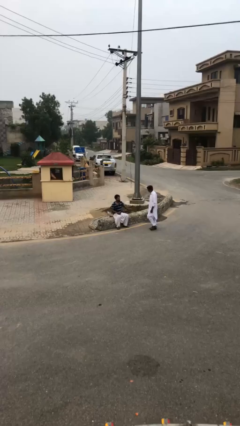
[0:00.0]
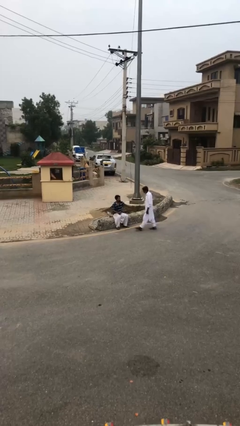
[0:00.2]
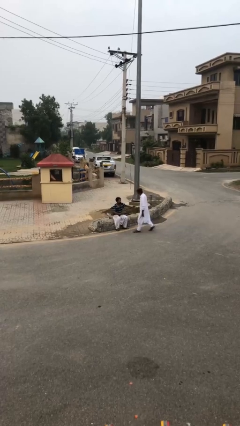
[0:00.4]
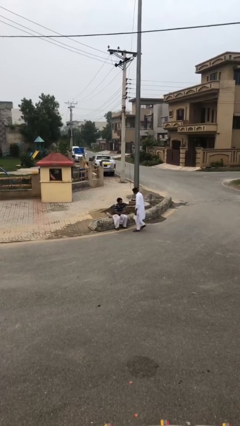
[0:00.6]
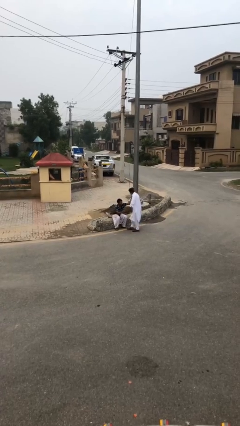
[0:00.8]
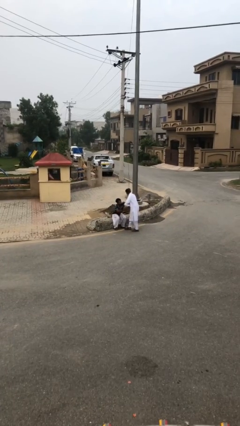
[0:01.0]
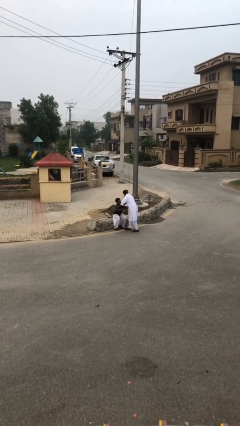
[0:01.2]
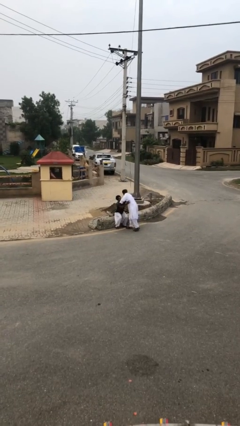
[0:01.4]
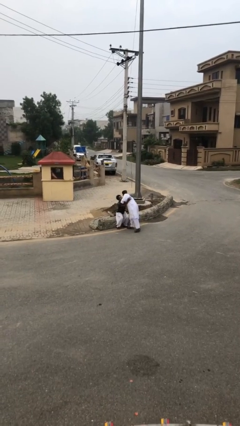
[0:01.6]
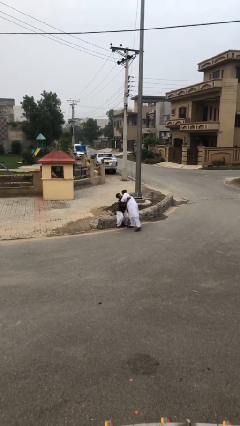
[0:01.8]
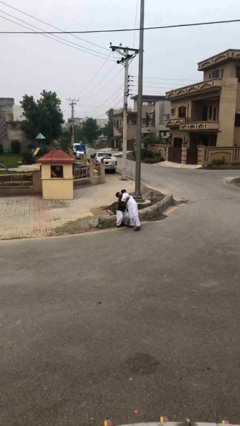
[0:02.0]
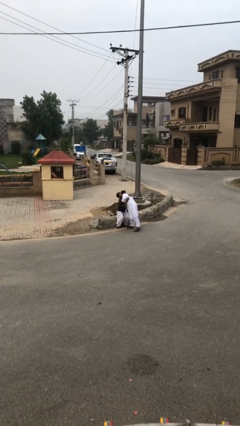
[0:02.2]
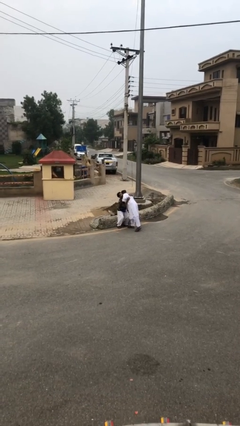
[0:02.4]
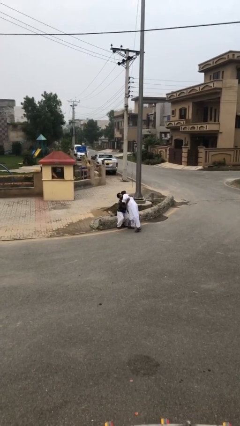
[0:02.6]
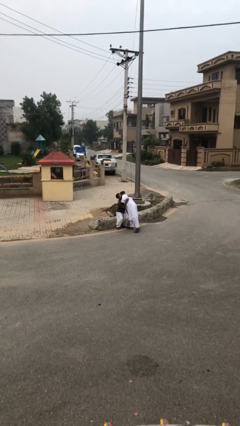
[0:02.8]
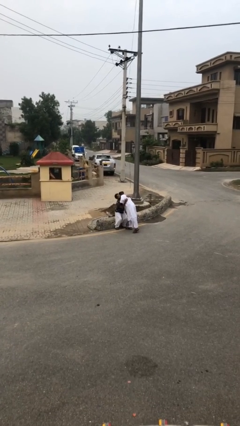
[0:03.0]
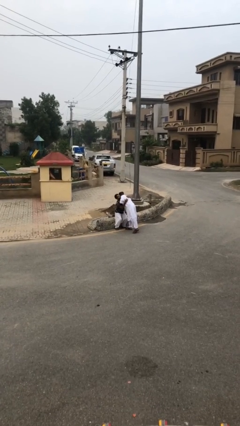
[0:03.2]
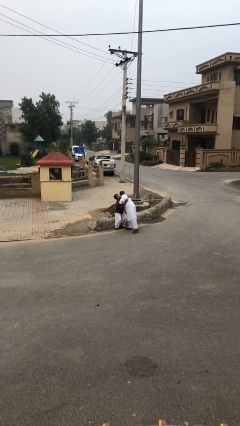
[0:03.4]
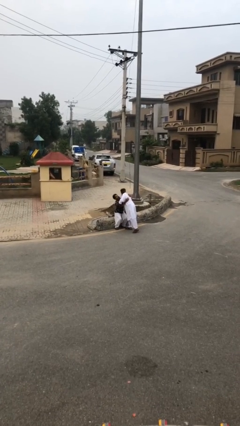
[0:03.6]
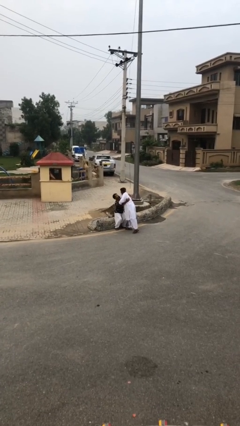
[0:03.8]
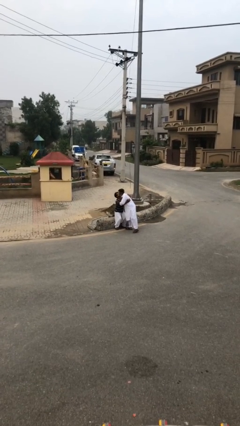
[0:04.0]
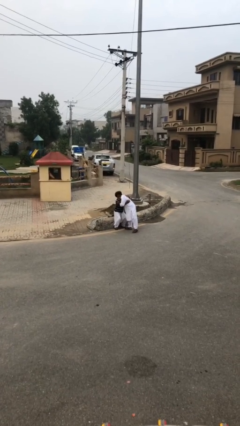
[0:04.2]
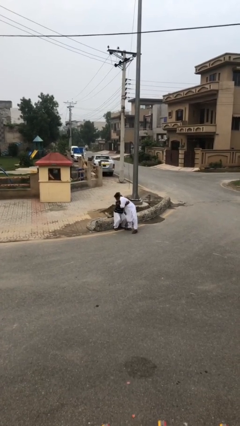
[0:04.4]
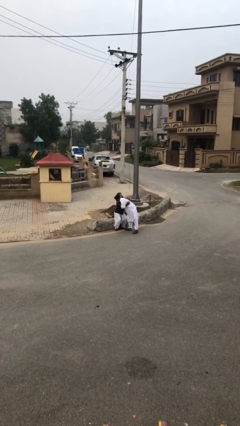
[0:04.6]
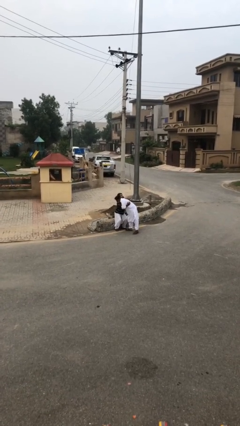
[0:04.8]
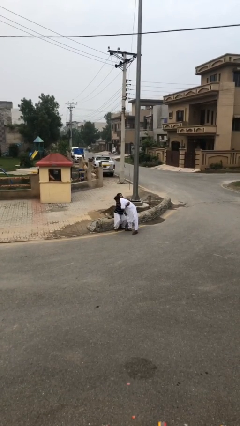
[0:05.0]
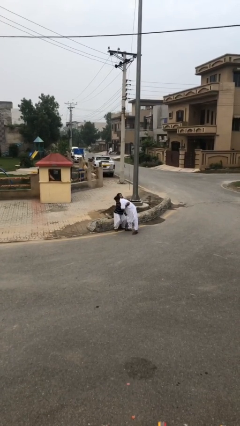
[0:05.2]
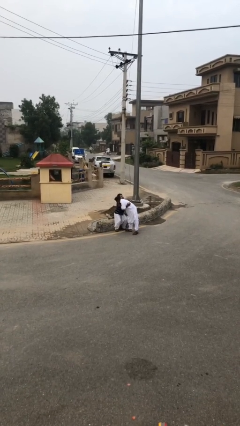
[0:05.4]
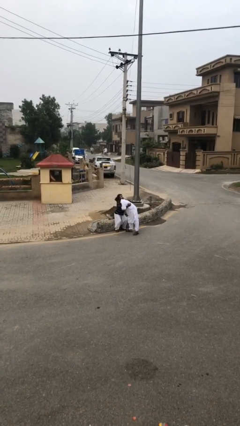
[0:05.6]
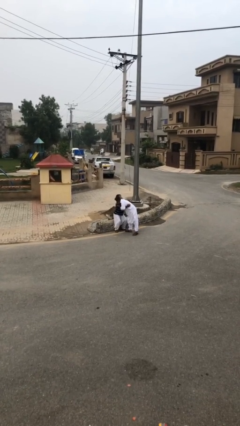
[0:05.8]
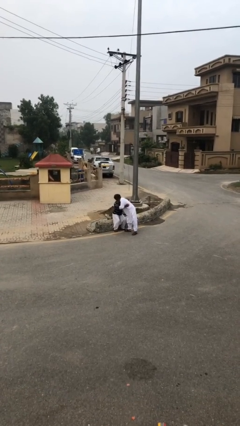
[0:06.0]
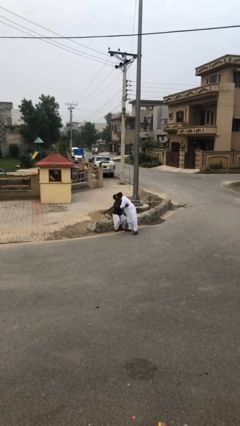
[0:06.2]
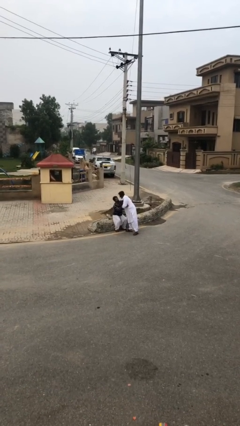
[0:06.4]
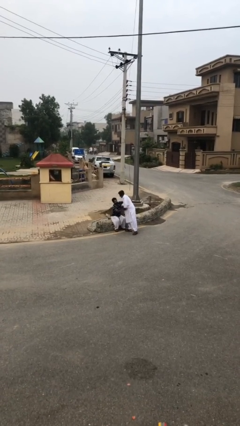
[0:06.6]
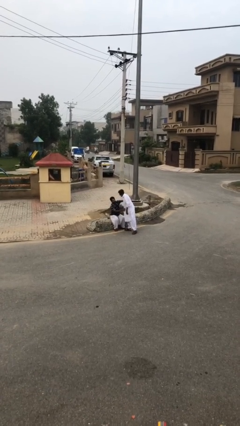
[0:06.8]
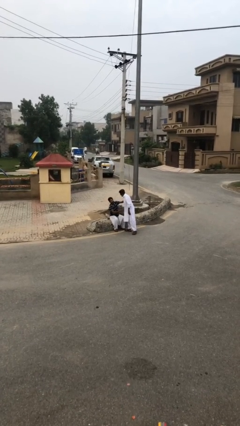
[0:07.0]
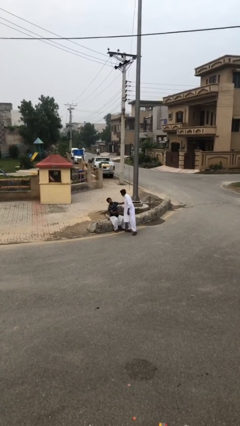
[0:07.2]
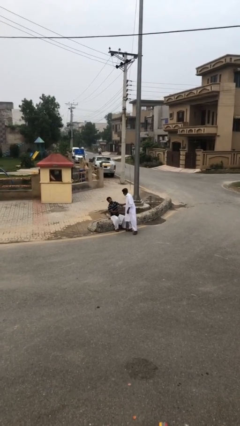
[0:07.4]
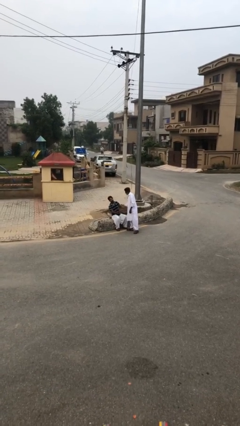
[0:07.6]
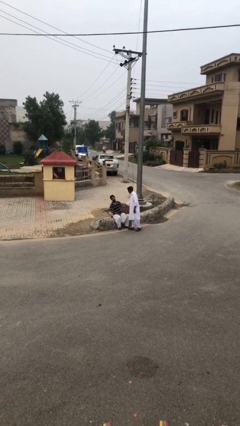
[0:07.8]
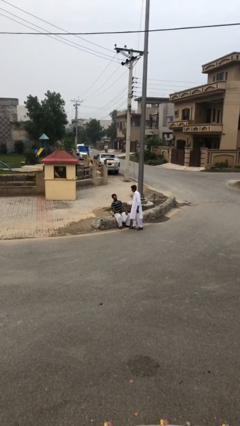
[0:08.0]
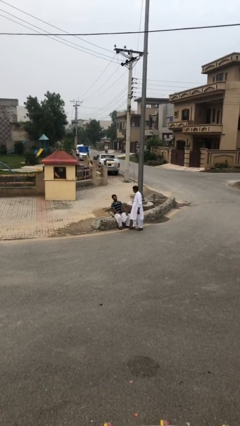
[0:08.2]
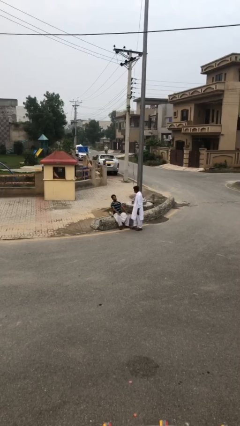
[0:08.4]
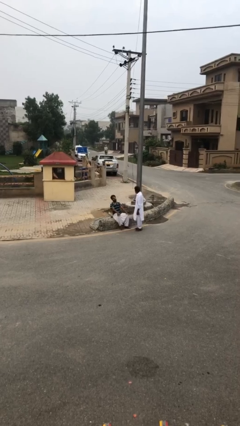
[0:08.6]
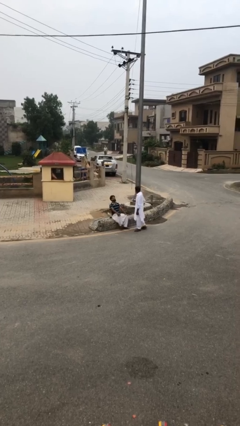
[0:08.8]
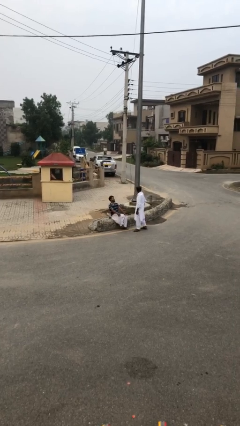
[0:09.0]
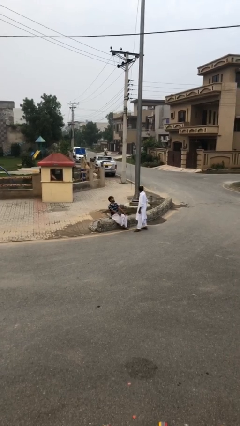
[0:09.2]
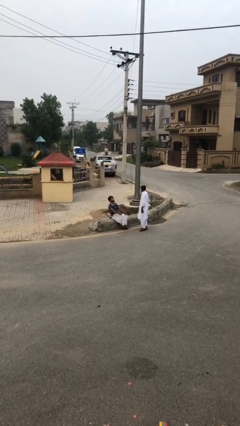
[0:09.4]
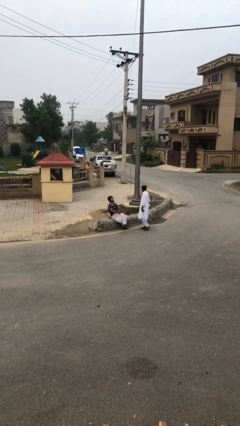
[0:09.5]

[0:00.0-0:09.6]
person embraces person

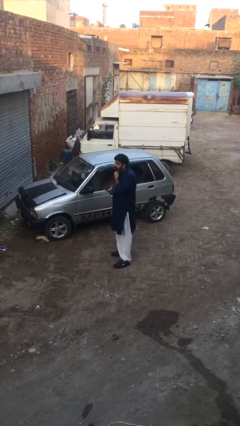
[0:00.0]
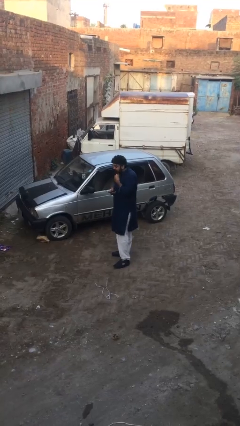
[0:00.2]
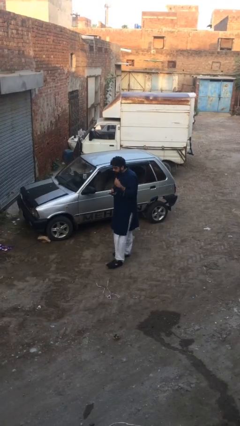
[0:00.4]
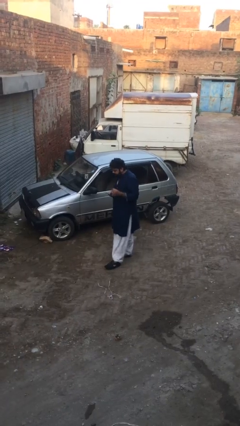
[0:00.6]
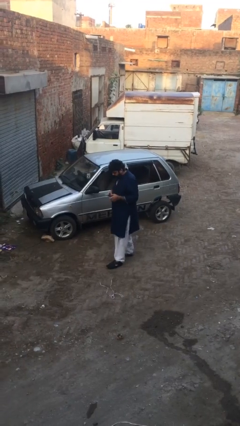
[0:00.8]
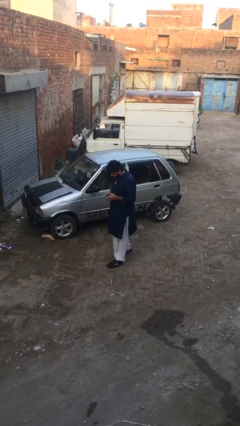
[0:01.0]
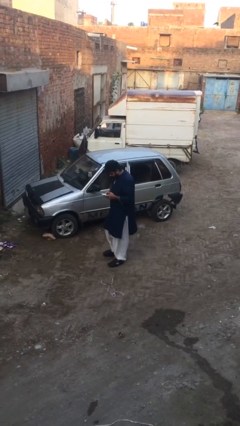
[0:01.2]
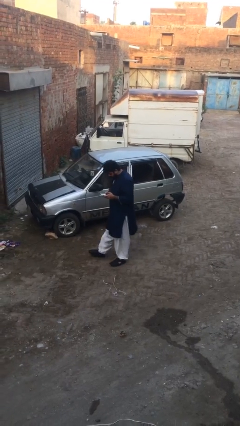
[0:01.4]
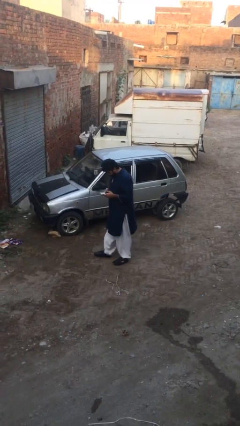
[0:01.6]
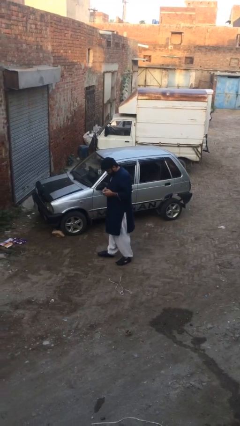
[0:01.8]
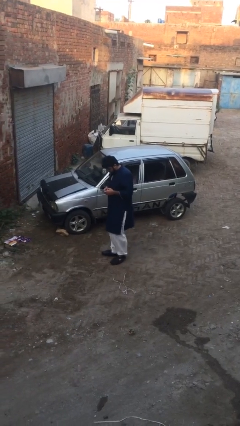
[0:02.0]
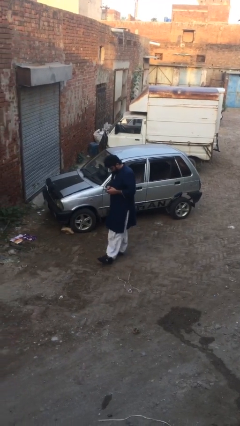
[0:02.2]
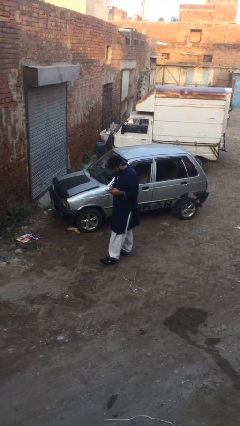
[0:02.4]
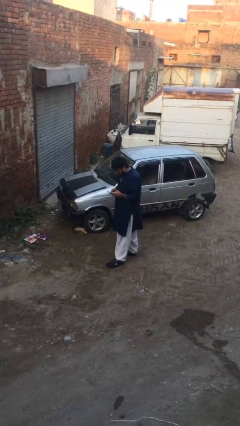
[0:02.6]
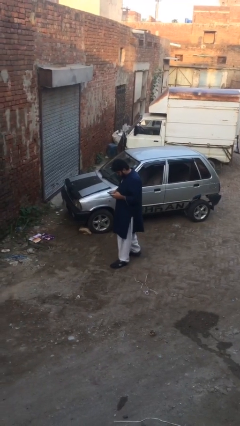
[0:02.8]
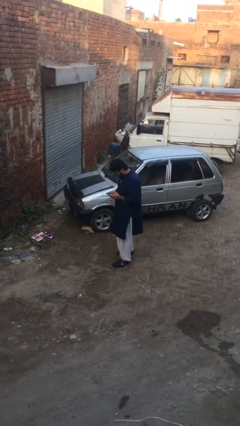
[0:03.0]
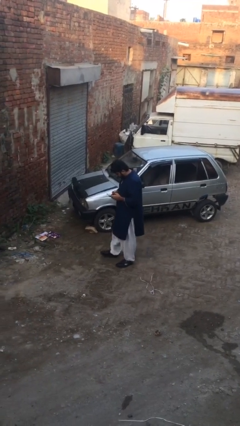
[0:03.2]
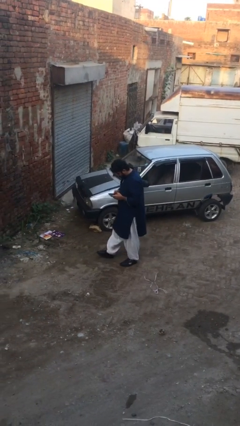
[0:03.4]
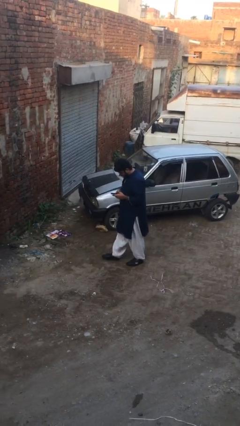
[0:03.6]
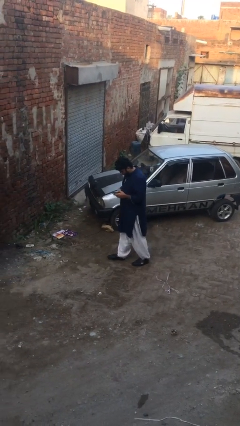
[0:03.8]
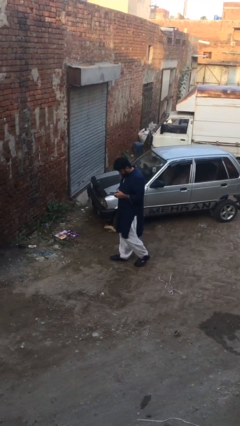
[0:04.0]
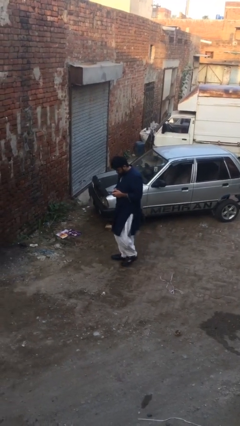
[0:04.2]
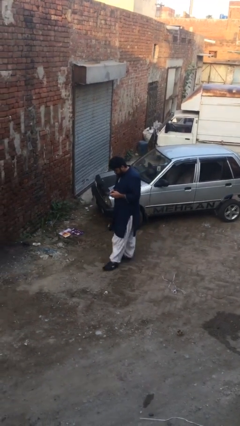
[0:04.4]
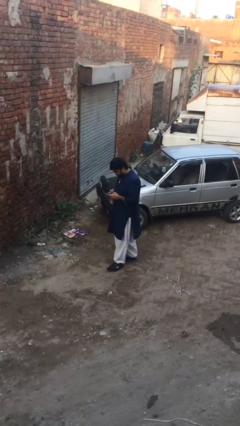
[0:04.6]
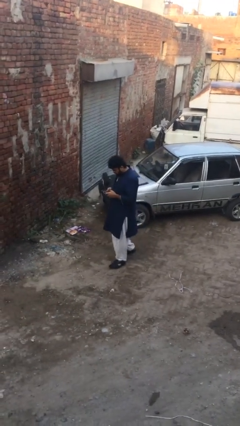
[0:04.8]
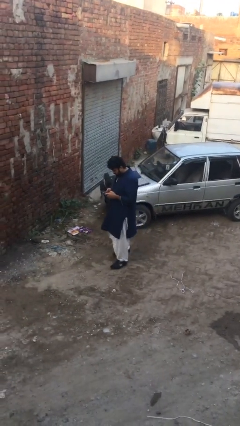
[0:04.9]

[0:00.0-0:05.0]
person texts on phone

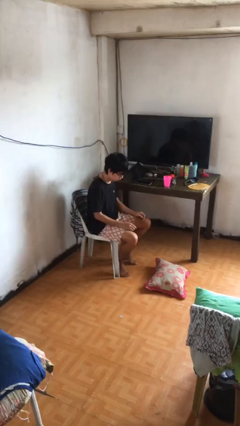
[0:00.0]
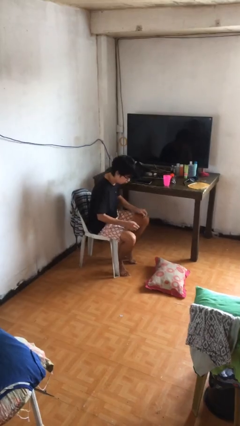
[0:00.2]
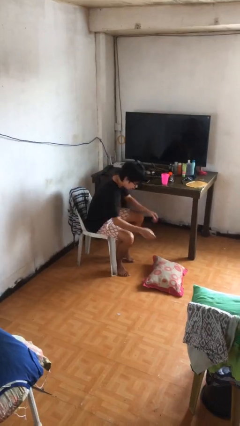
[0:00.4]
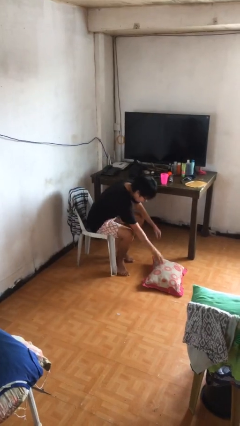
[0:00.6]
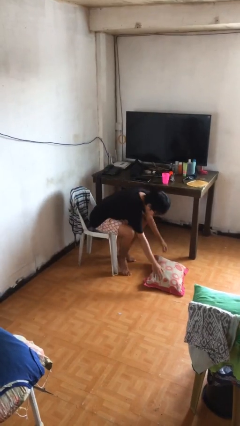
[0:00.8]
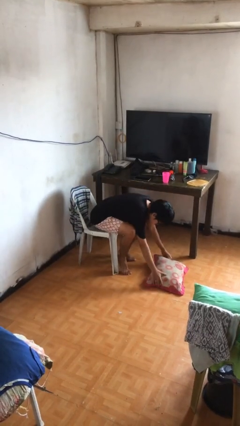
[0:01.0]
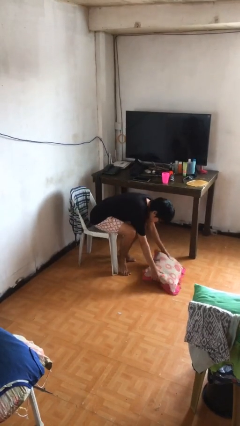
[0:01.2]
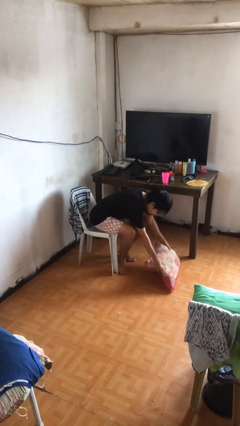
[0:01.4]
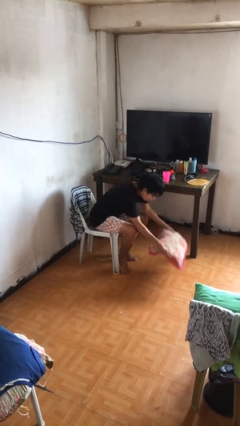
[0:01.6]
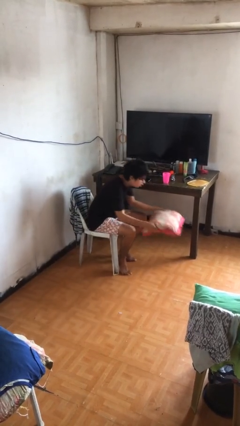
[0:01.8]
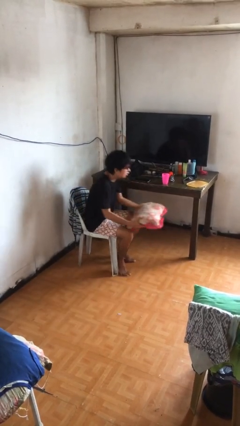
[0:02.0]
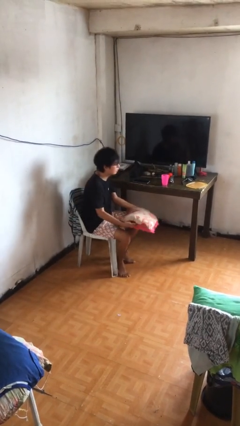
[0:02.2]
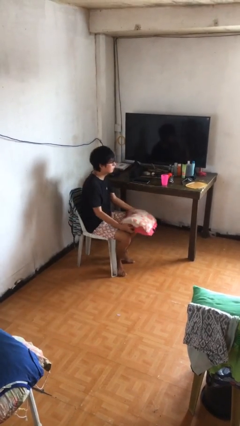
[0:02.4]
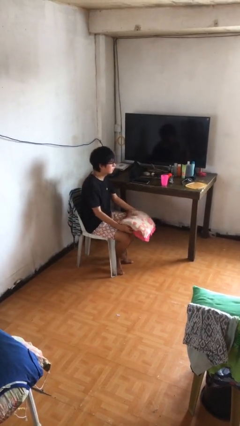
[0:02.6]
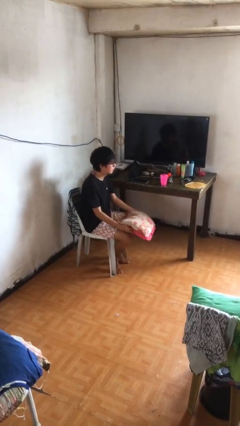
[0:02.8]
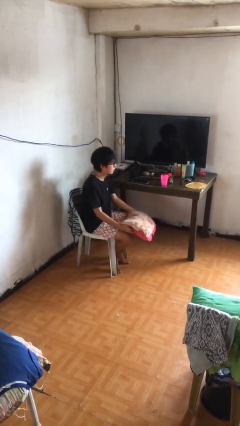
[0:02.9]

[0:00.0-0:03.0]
person picks up object from floor

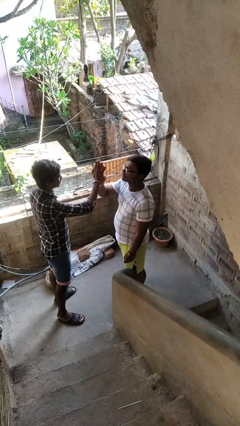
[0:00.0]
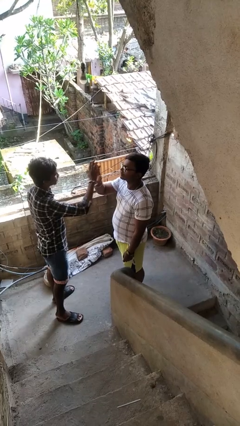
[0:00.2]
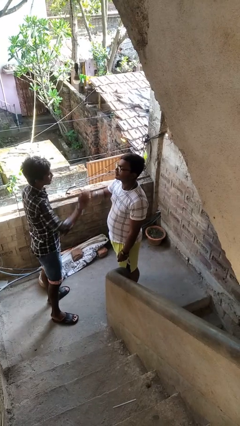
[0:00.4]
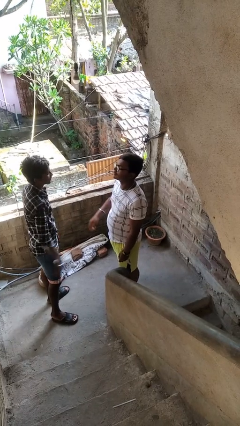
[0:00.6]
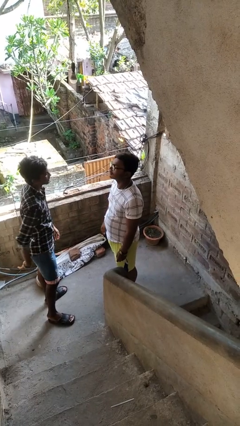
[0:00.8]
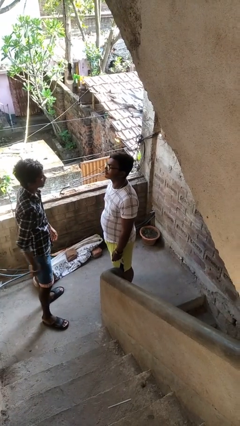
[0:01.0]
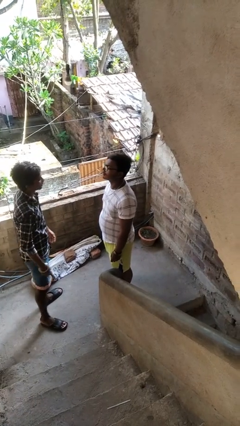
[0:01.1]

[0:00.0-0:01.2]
person highfives hand
